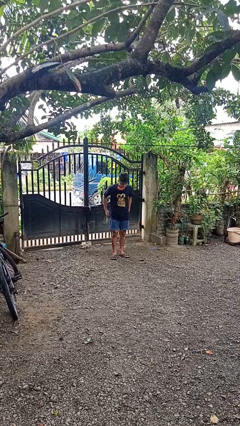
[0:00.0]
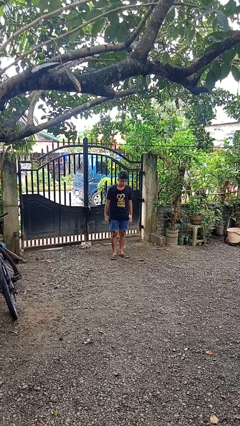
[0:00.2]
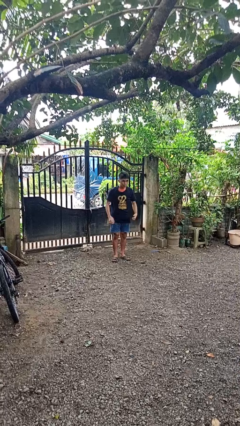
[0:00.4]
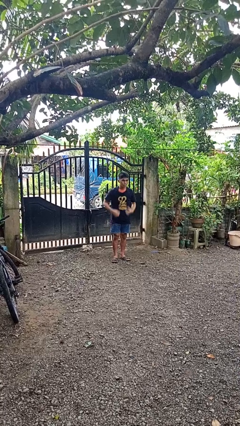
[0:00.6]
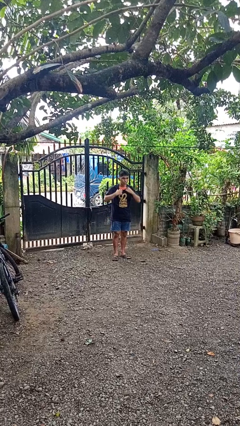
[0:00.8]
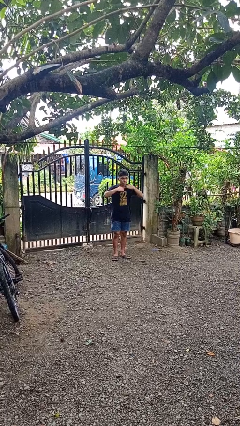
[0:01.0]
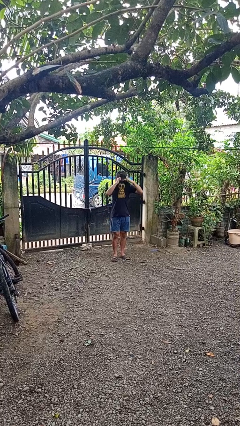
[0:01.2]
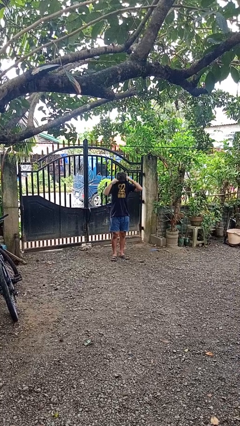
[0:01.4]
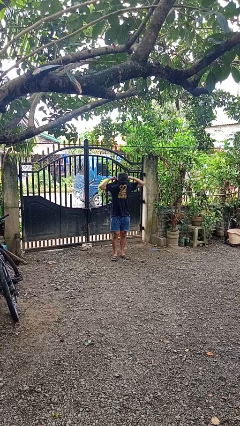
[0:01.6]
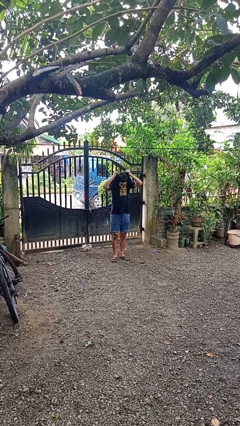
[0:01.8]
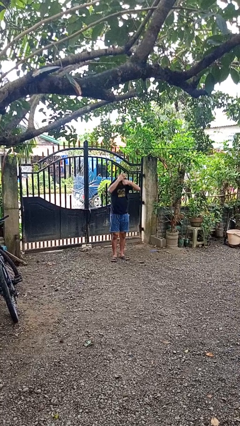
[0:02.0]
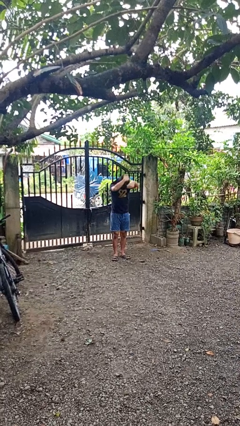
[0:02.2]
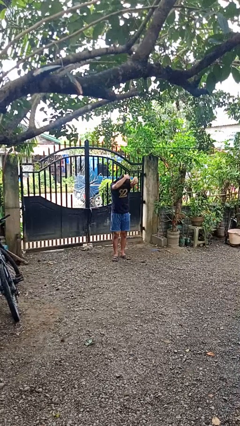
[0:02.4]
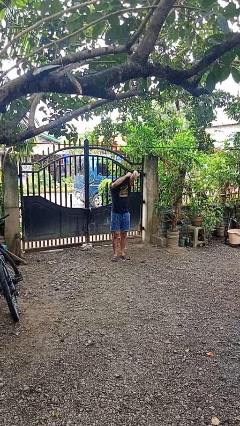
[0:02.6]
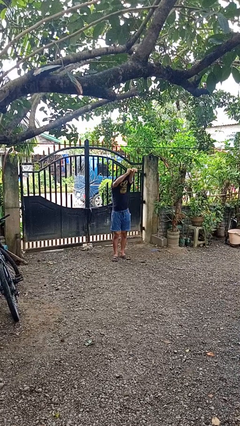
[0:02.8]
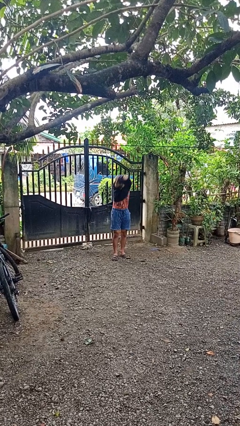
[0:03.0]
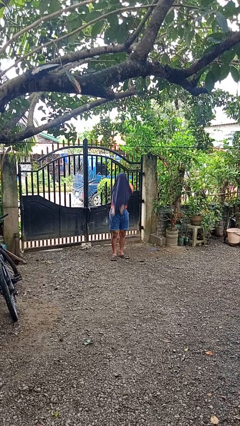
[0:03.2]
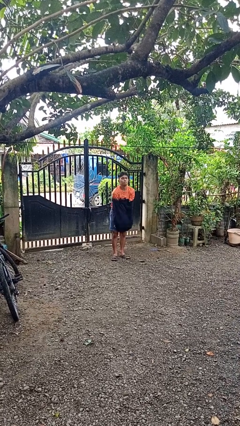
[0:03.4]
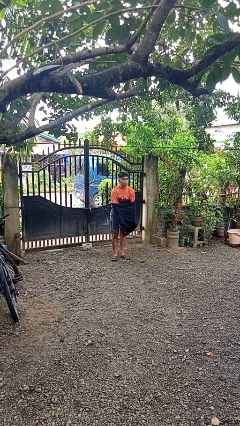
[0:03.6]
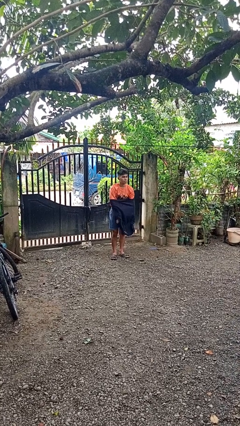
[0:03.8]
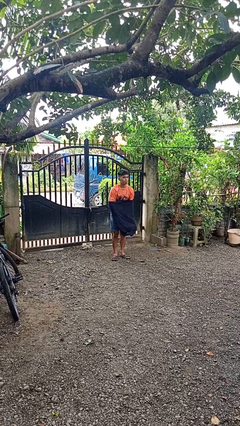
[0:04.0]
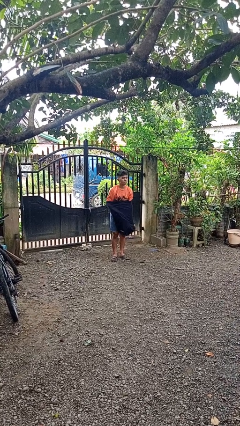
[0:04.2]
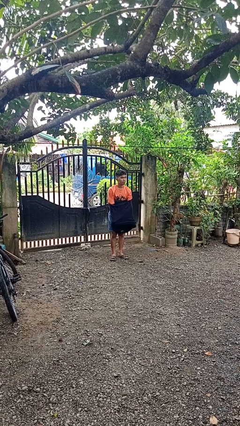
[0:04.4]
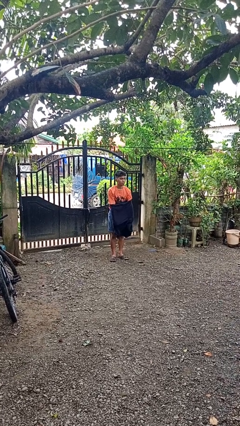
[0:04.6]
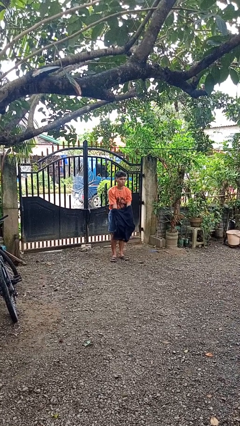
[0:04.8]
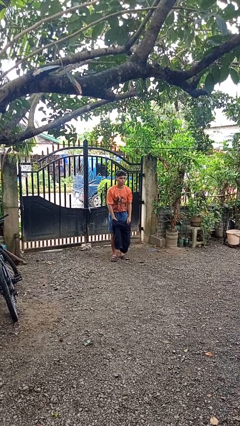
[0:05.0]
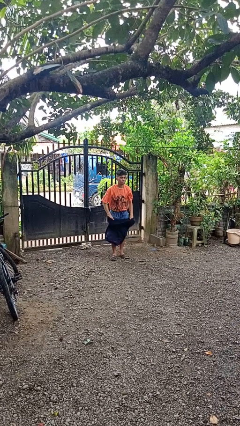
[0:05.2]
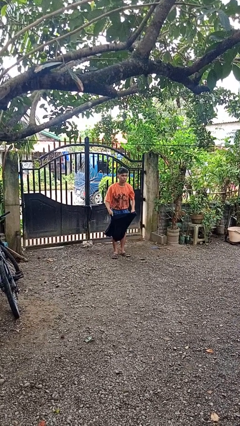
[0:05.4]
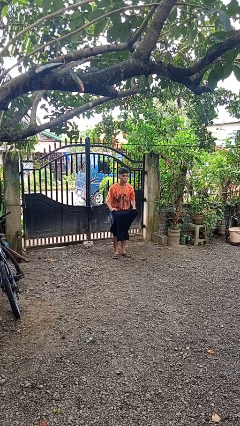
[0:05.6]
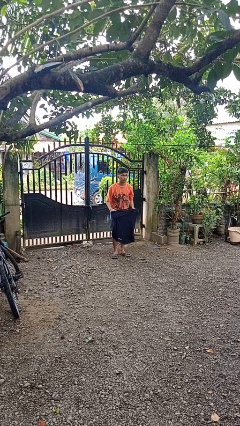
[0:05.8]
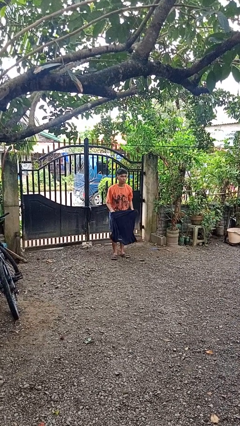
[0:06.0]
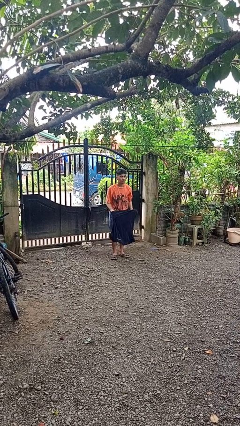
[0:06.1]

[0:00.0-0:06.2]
person takes off shirt

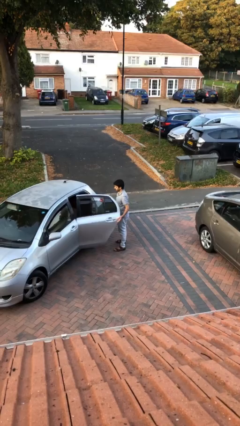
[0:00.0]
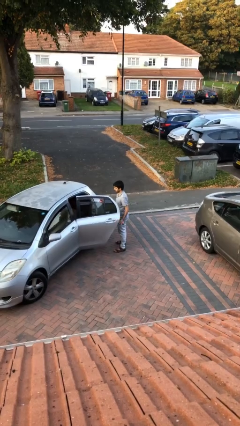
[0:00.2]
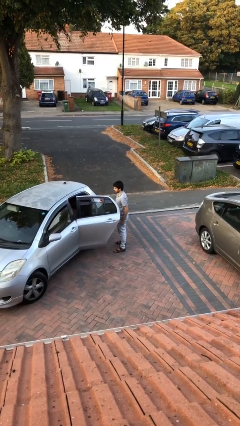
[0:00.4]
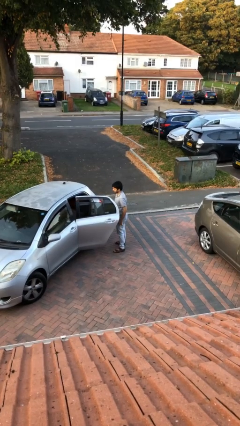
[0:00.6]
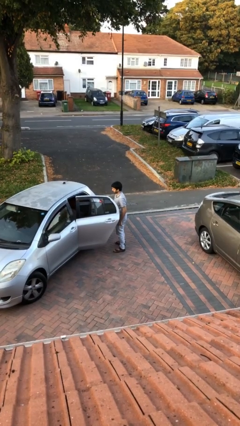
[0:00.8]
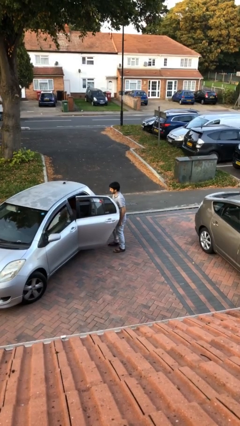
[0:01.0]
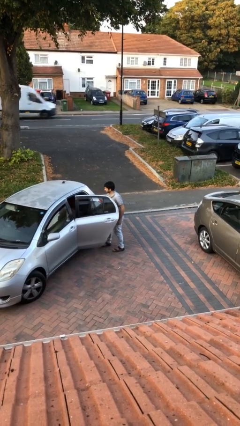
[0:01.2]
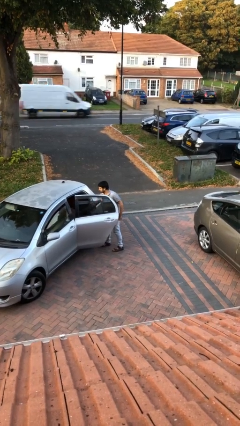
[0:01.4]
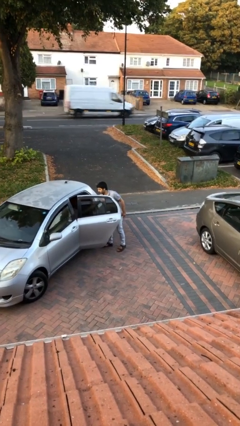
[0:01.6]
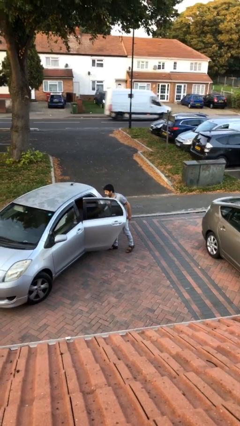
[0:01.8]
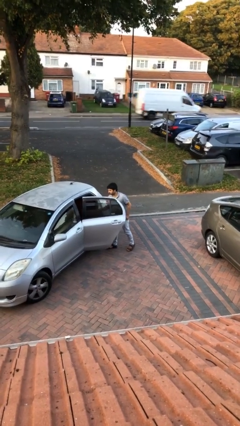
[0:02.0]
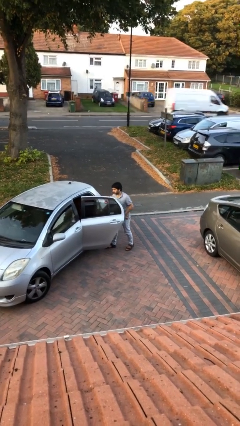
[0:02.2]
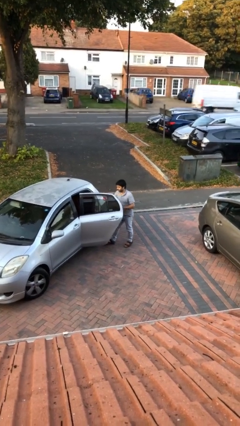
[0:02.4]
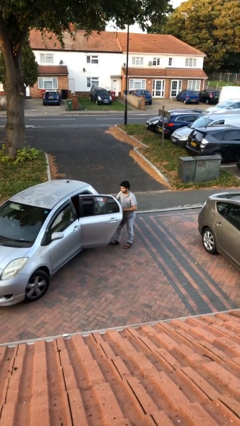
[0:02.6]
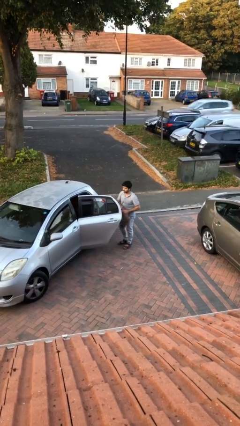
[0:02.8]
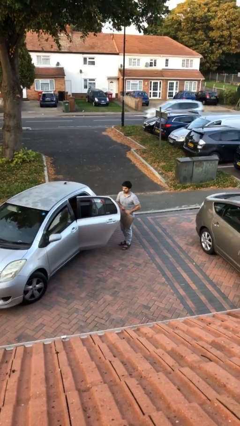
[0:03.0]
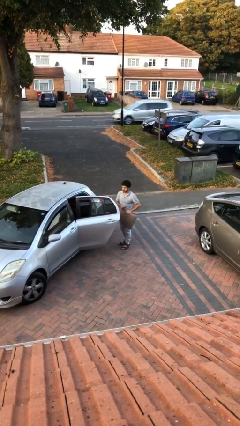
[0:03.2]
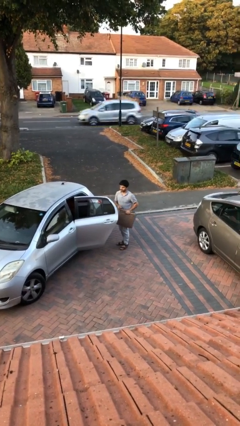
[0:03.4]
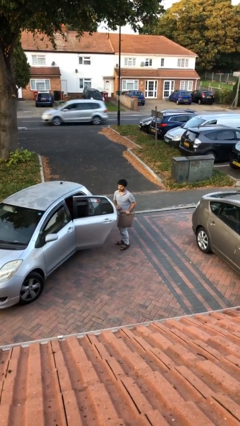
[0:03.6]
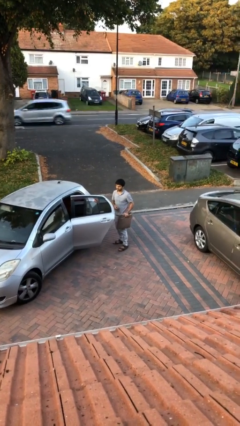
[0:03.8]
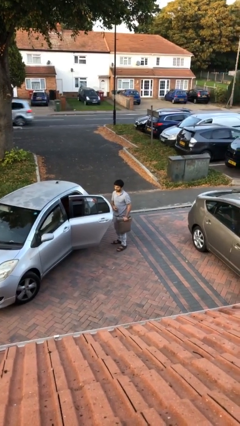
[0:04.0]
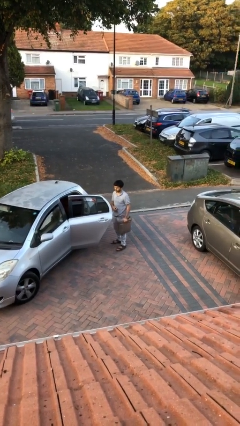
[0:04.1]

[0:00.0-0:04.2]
person unloads car

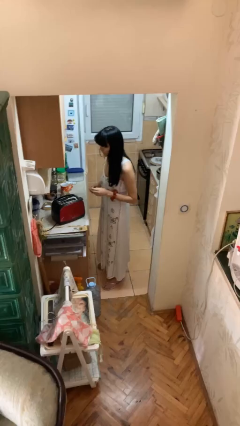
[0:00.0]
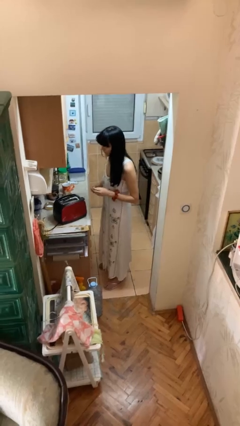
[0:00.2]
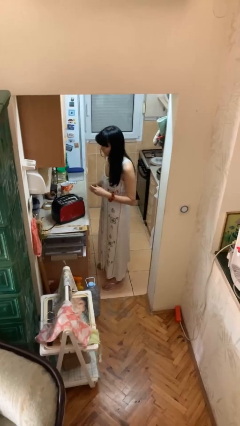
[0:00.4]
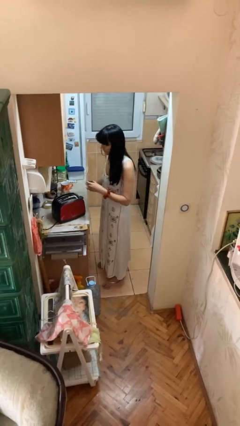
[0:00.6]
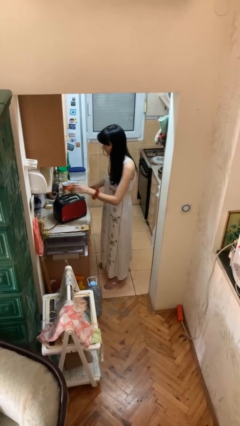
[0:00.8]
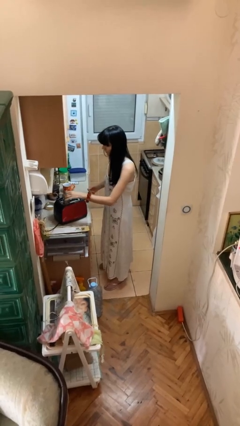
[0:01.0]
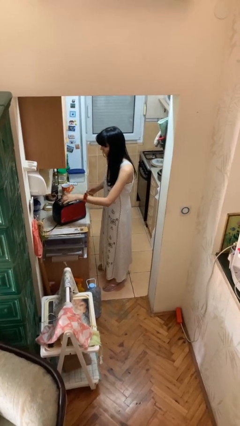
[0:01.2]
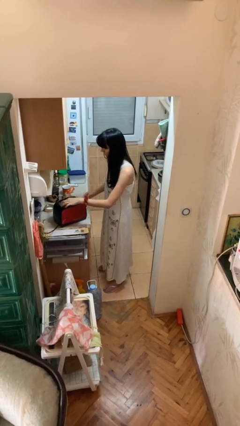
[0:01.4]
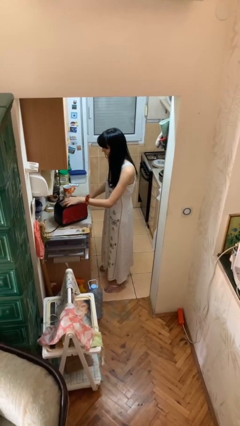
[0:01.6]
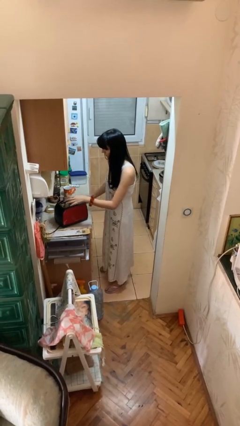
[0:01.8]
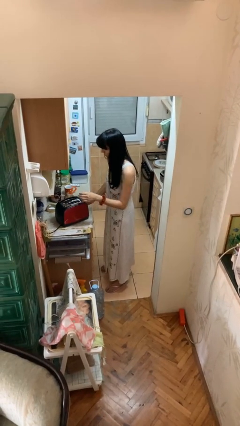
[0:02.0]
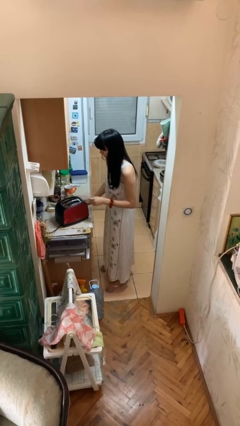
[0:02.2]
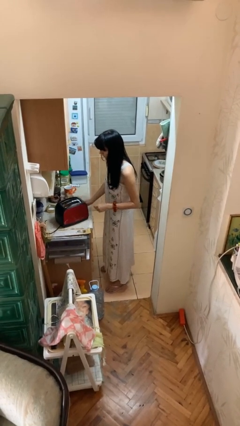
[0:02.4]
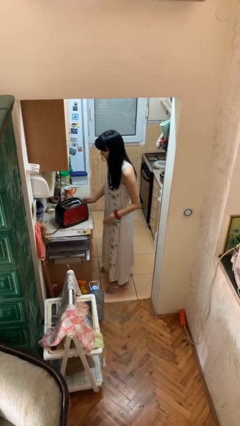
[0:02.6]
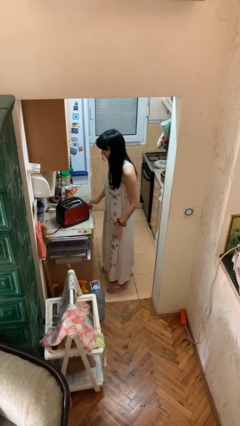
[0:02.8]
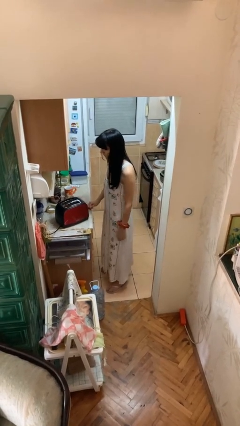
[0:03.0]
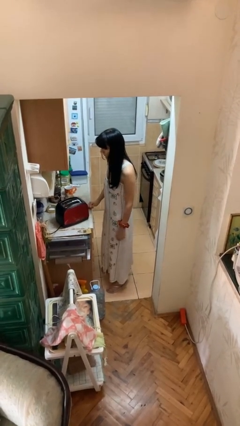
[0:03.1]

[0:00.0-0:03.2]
person puts object into toaster

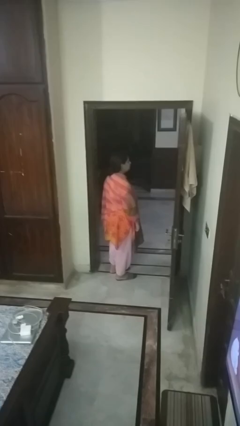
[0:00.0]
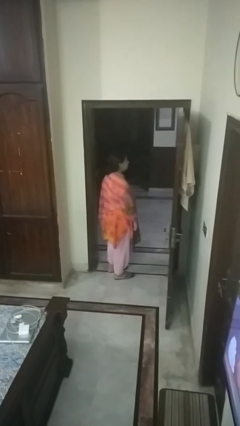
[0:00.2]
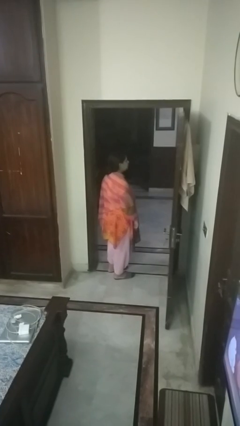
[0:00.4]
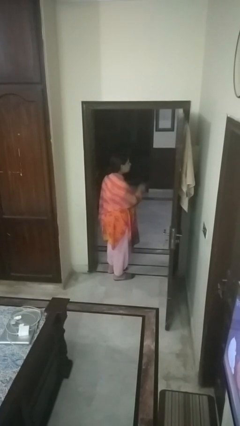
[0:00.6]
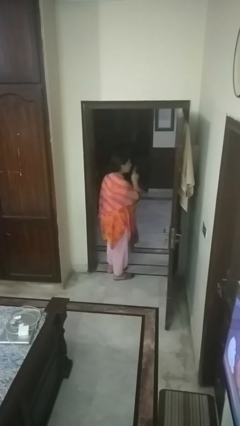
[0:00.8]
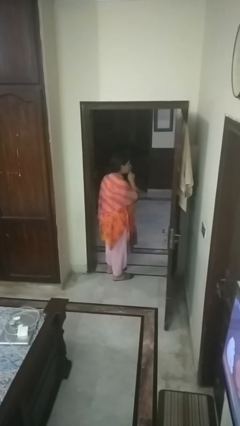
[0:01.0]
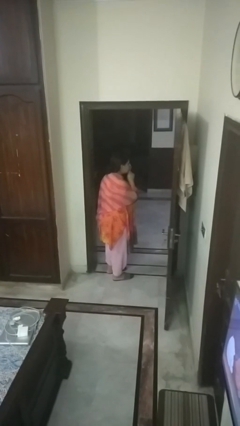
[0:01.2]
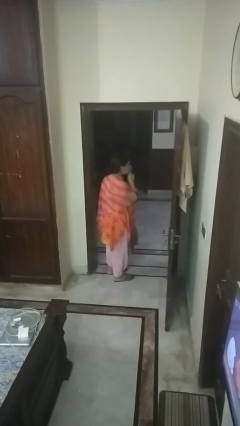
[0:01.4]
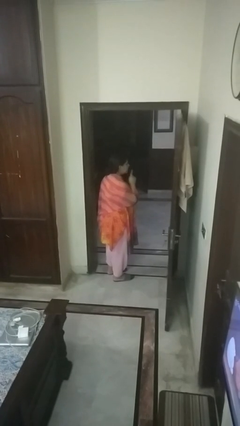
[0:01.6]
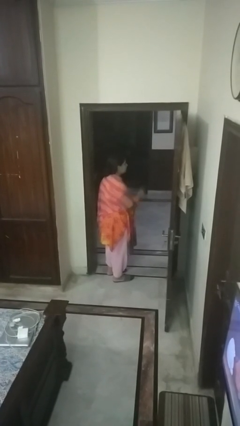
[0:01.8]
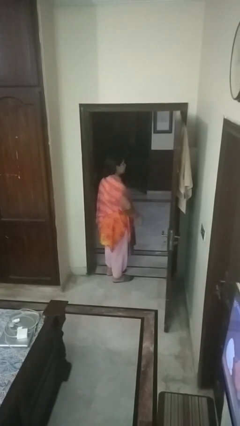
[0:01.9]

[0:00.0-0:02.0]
person gestures be quiet

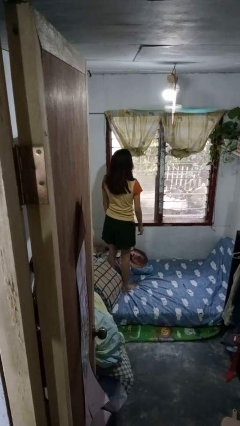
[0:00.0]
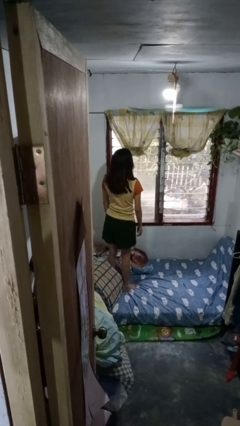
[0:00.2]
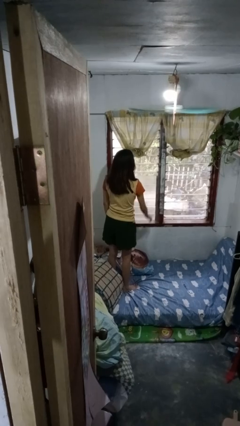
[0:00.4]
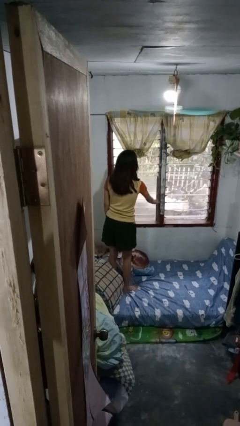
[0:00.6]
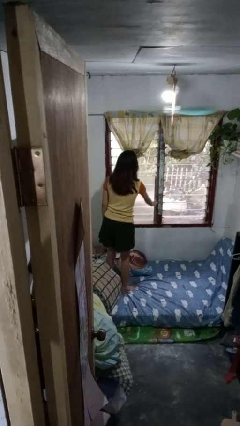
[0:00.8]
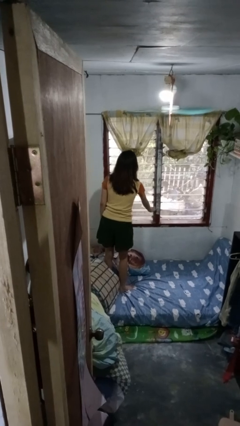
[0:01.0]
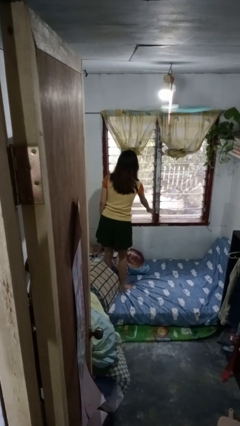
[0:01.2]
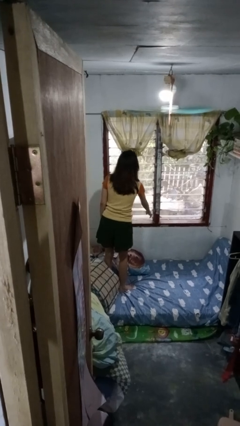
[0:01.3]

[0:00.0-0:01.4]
person opens home window

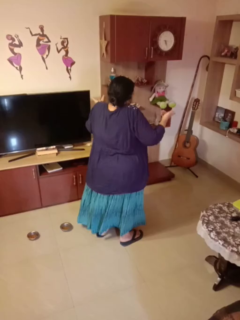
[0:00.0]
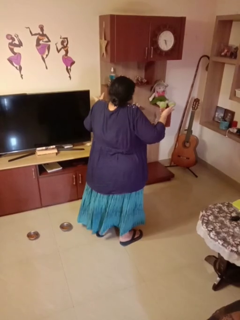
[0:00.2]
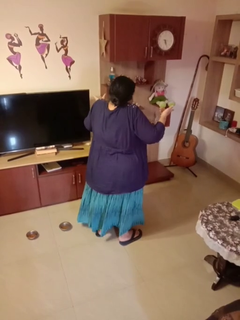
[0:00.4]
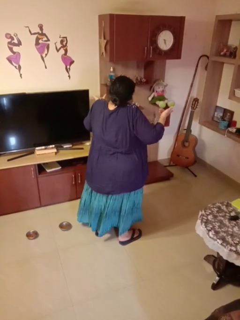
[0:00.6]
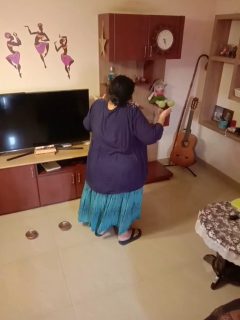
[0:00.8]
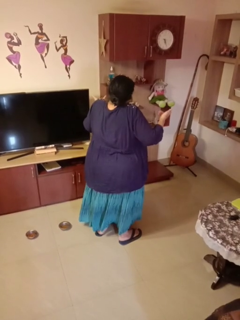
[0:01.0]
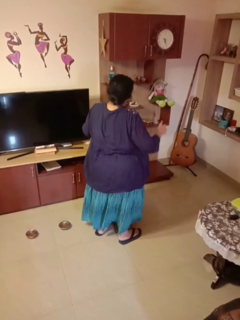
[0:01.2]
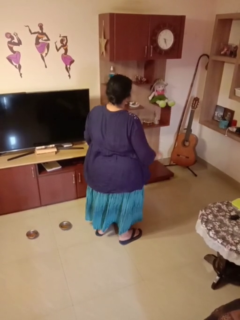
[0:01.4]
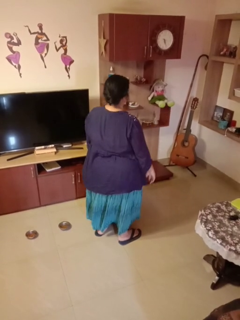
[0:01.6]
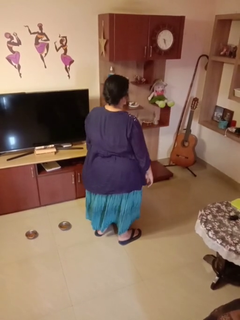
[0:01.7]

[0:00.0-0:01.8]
person shrugs
